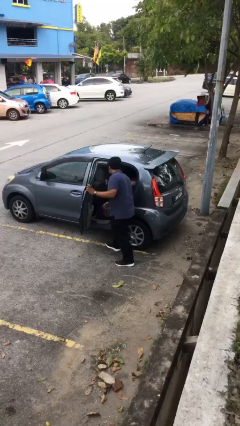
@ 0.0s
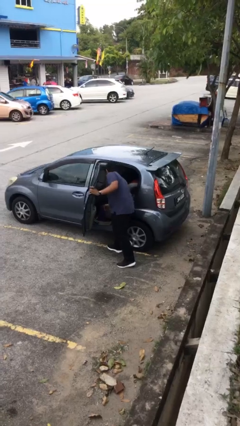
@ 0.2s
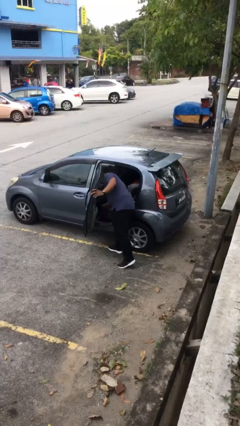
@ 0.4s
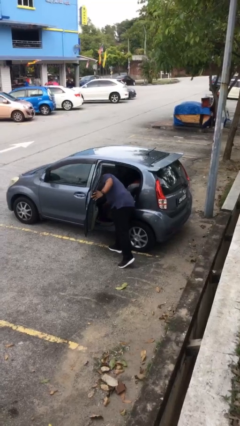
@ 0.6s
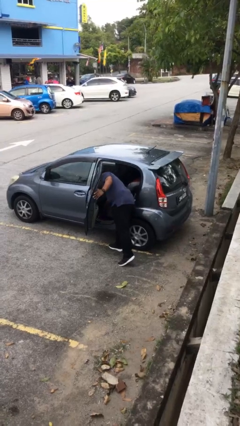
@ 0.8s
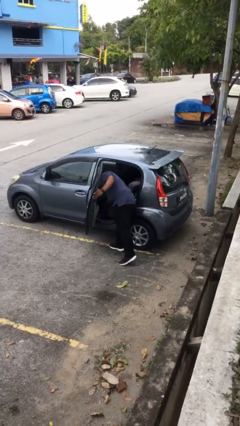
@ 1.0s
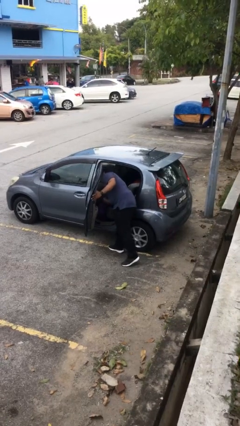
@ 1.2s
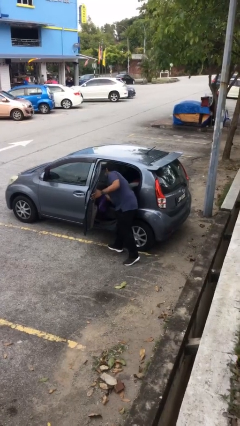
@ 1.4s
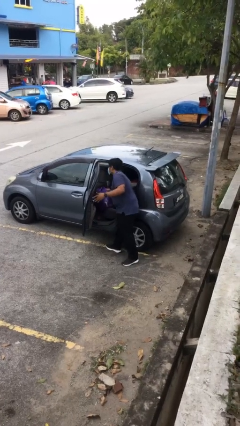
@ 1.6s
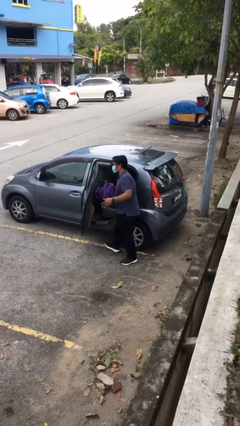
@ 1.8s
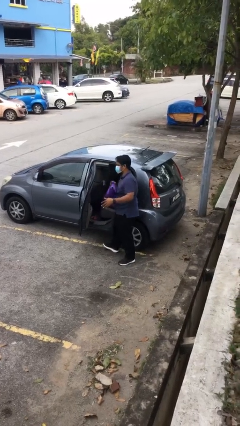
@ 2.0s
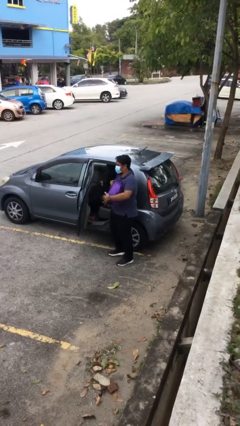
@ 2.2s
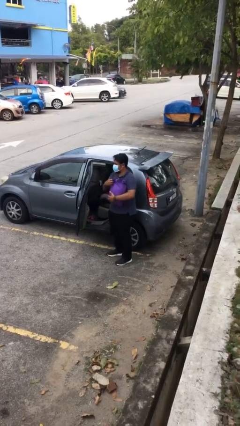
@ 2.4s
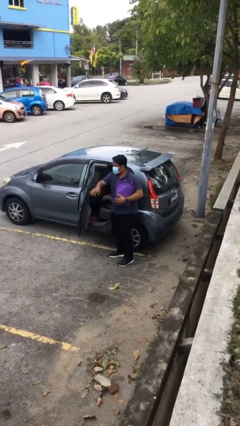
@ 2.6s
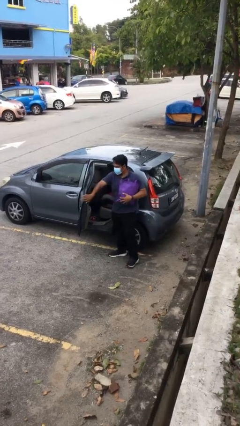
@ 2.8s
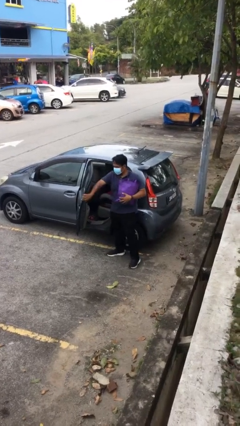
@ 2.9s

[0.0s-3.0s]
person unloads car

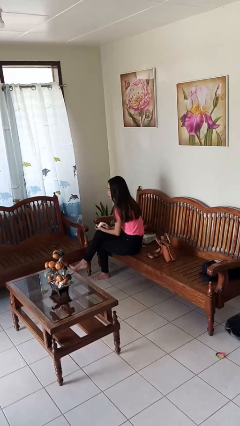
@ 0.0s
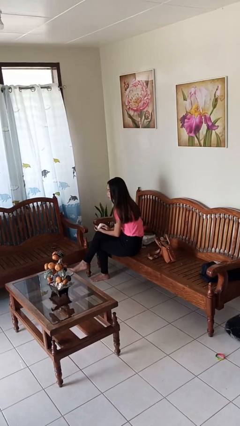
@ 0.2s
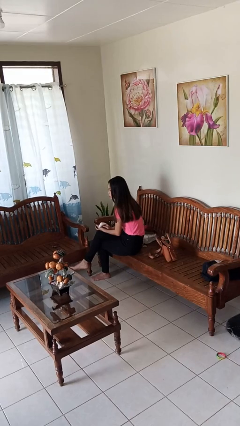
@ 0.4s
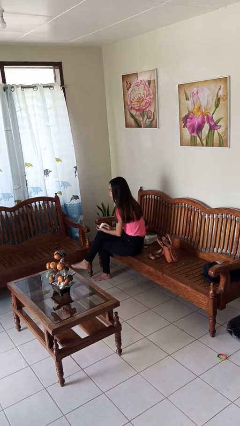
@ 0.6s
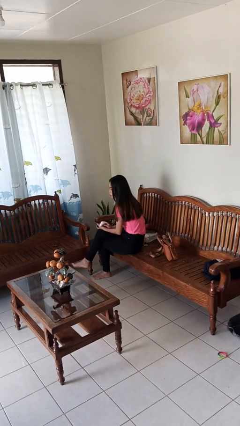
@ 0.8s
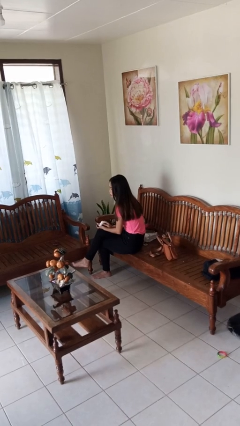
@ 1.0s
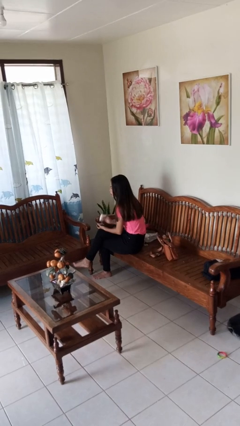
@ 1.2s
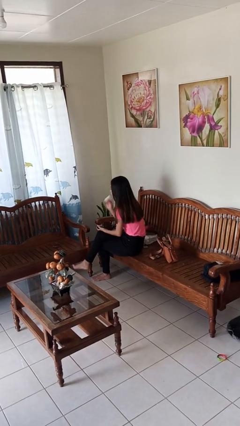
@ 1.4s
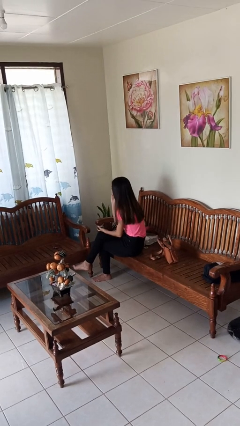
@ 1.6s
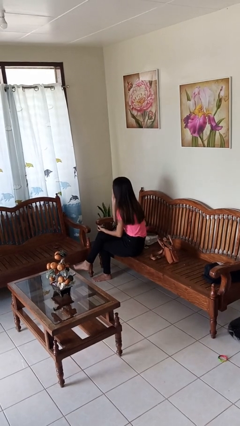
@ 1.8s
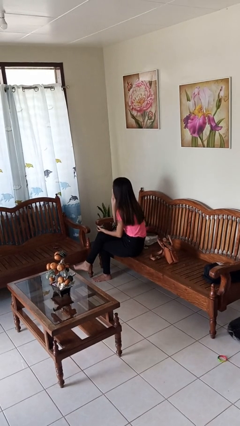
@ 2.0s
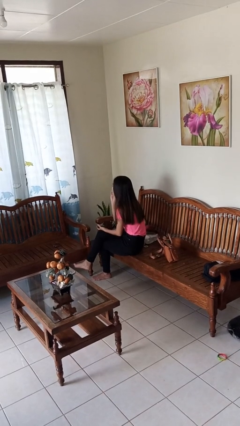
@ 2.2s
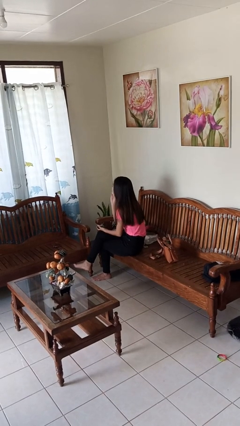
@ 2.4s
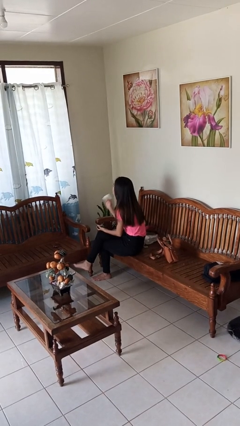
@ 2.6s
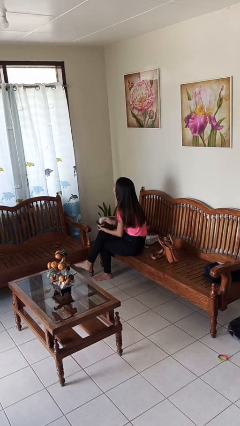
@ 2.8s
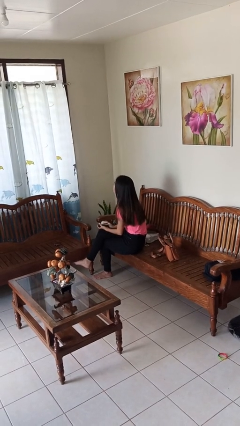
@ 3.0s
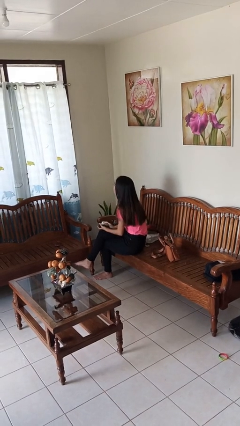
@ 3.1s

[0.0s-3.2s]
person applies foundation makeup

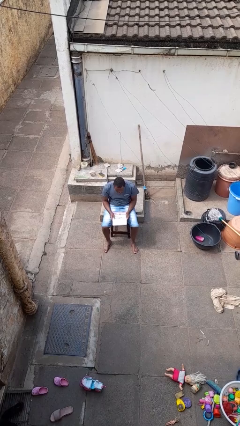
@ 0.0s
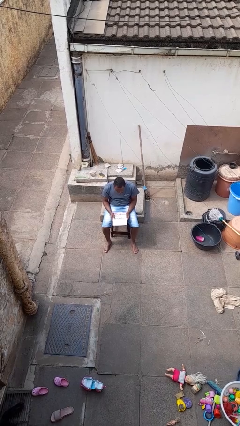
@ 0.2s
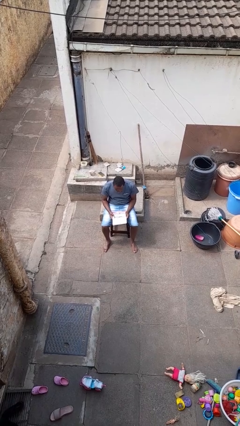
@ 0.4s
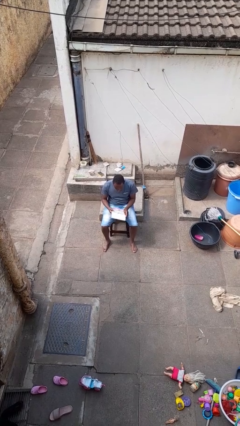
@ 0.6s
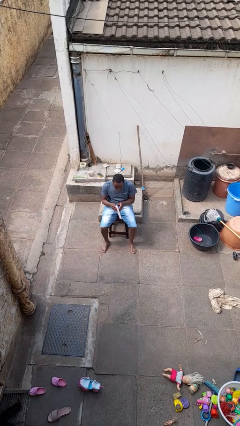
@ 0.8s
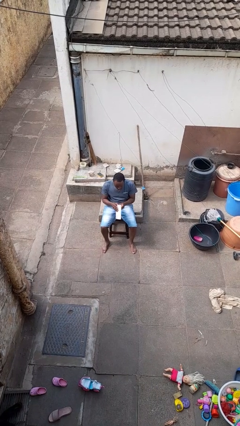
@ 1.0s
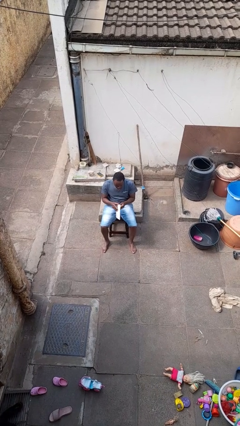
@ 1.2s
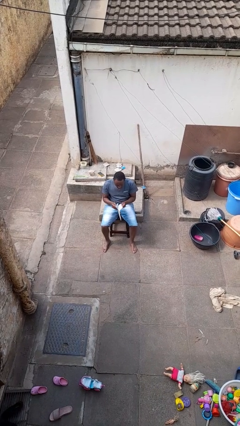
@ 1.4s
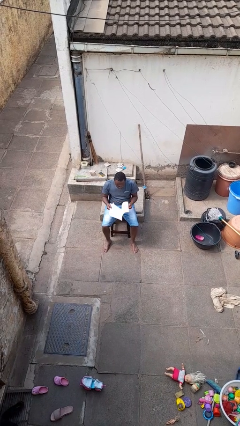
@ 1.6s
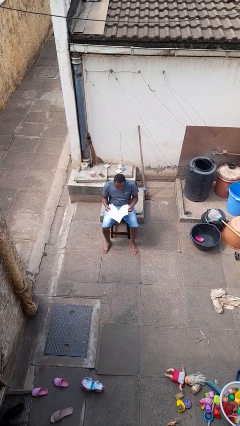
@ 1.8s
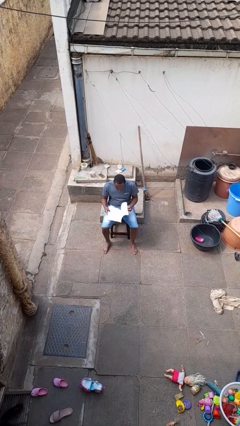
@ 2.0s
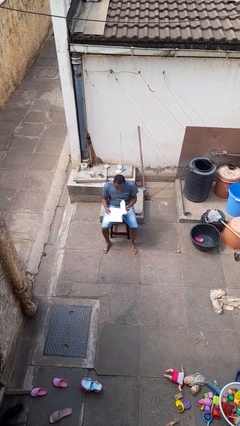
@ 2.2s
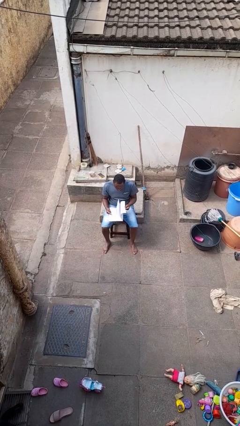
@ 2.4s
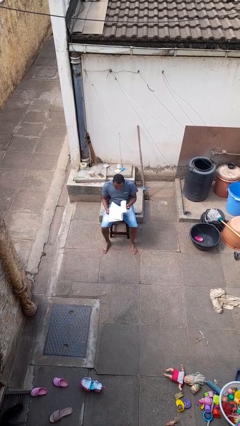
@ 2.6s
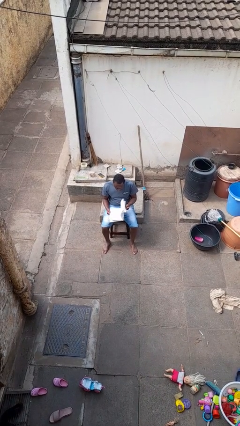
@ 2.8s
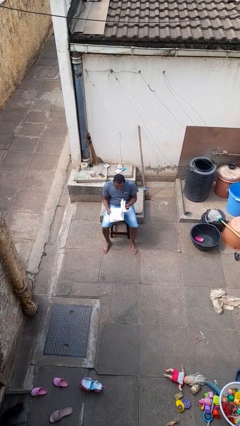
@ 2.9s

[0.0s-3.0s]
person reads magazine

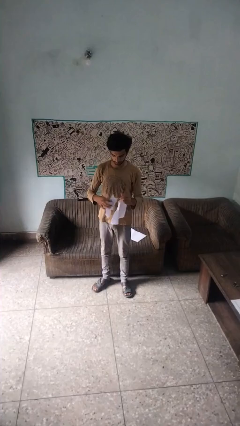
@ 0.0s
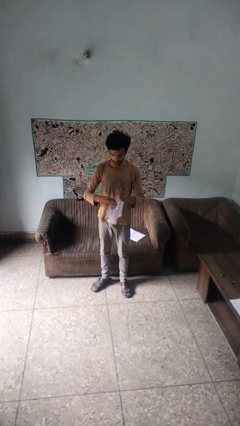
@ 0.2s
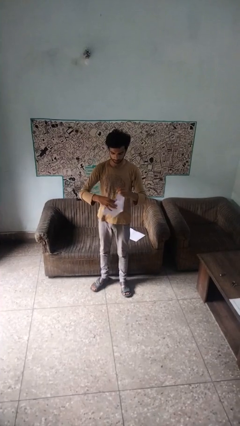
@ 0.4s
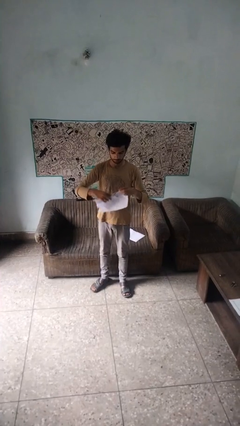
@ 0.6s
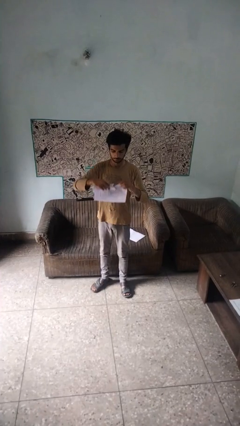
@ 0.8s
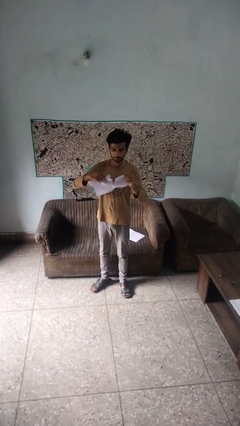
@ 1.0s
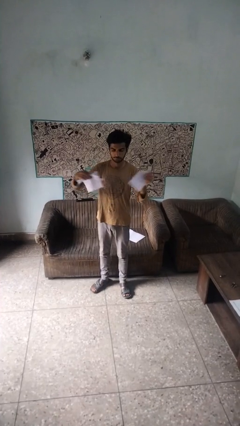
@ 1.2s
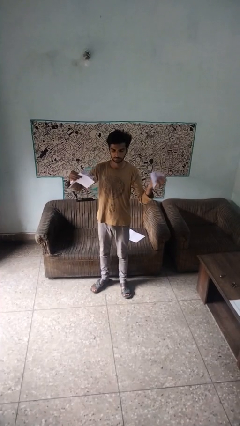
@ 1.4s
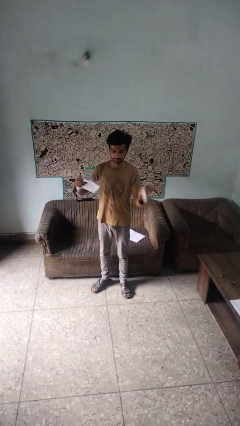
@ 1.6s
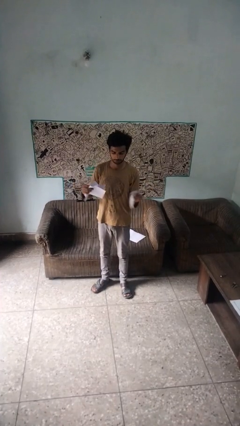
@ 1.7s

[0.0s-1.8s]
person tears paper

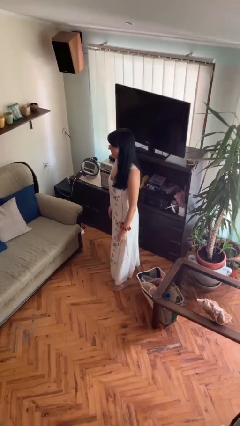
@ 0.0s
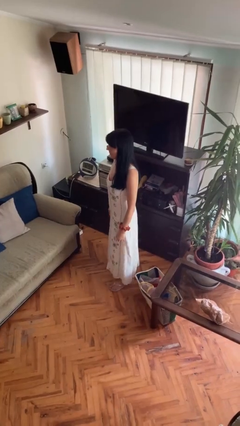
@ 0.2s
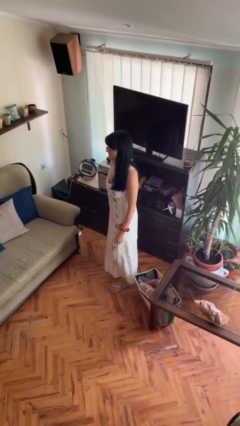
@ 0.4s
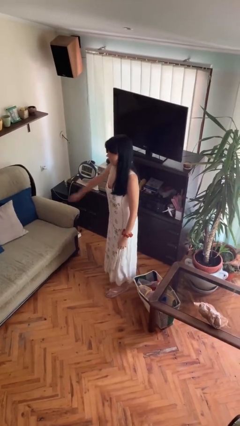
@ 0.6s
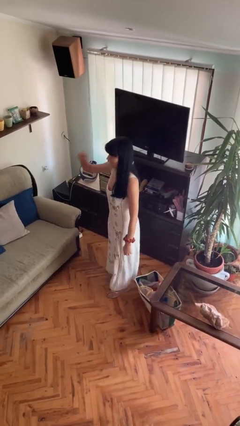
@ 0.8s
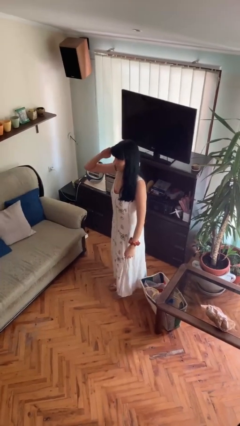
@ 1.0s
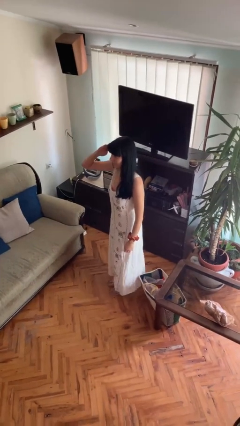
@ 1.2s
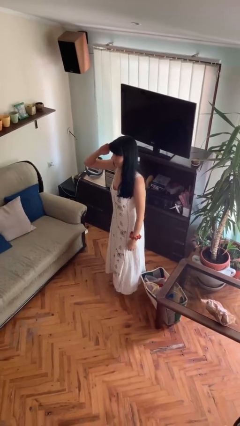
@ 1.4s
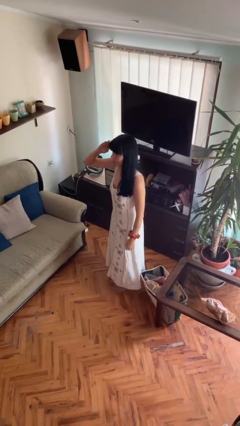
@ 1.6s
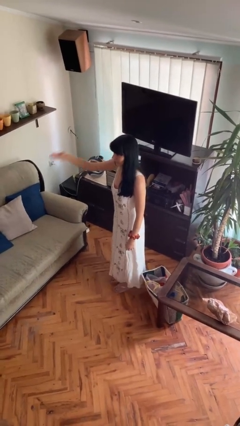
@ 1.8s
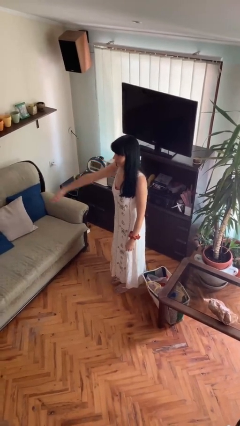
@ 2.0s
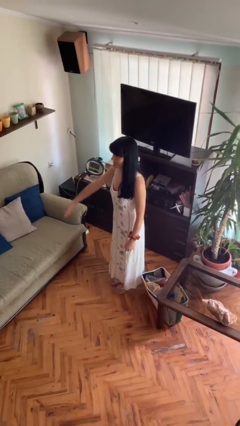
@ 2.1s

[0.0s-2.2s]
person salutes

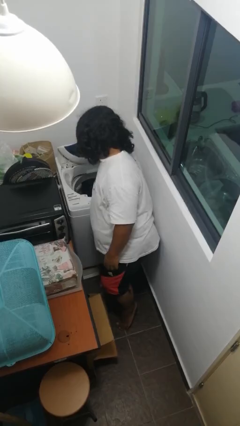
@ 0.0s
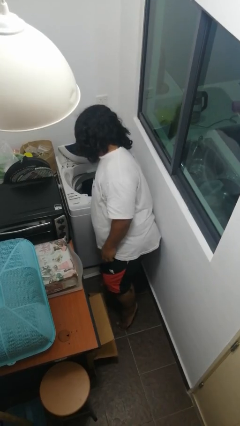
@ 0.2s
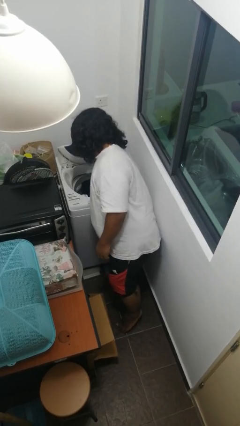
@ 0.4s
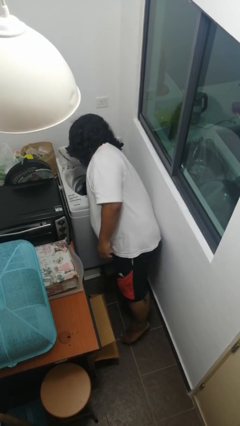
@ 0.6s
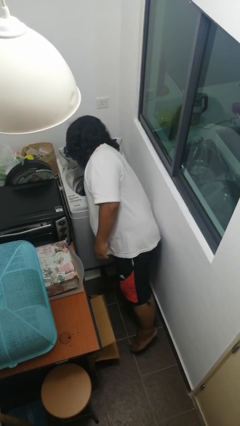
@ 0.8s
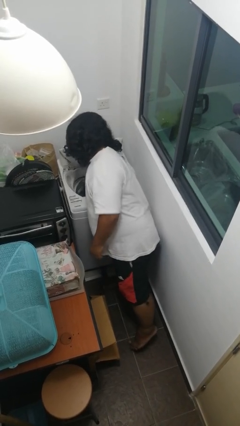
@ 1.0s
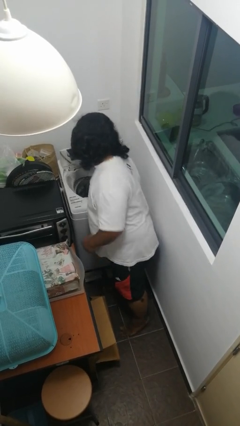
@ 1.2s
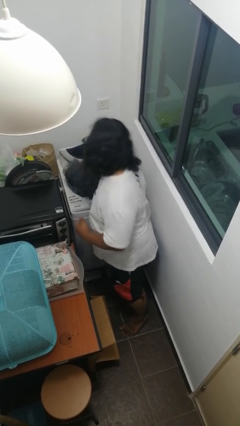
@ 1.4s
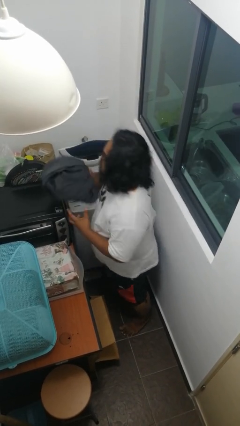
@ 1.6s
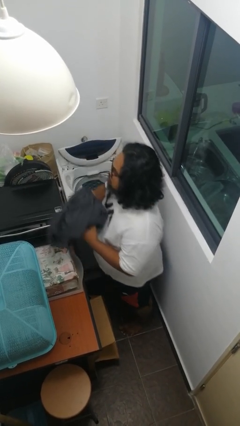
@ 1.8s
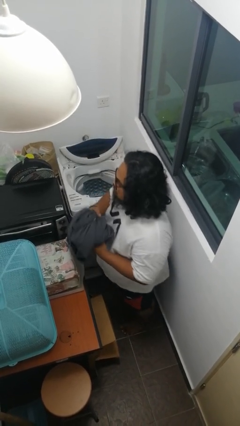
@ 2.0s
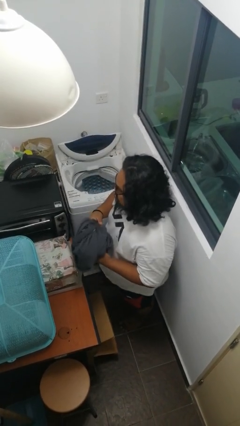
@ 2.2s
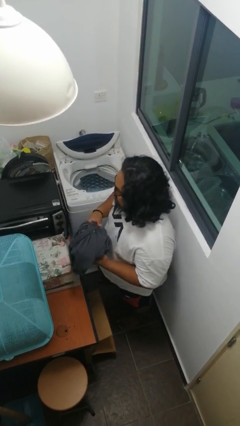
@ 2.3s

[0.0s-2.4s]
person unloads clotheswasher

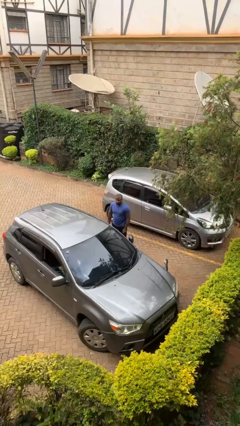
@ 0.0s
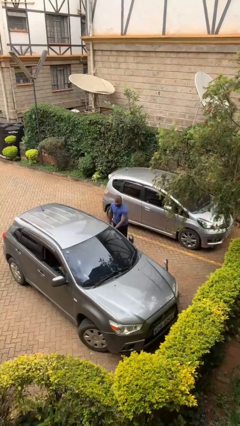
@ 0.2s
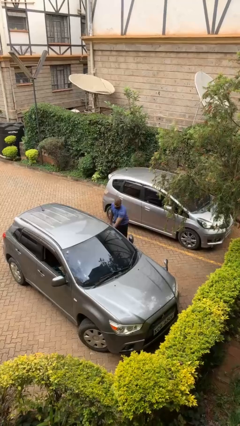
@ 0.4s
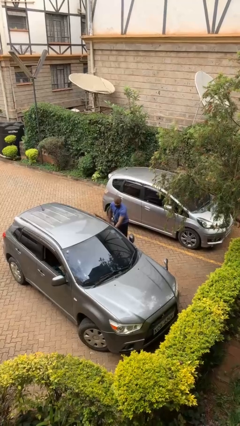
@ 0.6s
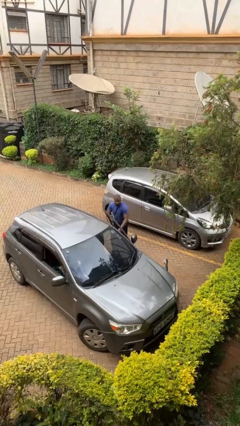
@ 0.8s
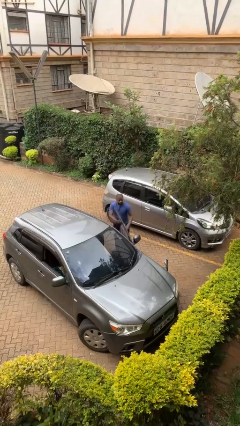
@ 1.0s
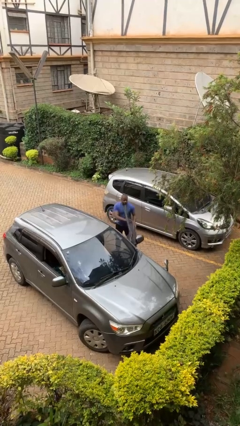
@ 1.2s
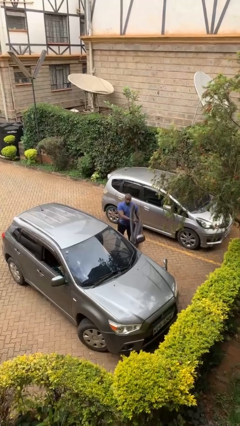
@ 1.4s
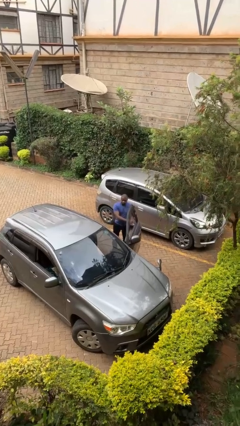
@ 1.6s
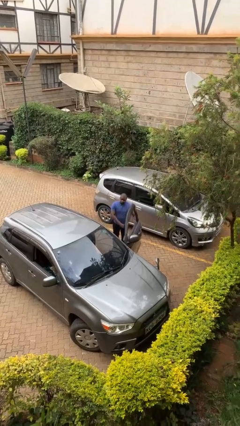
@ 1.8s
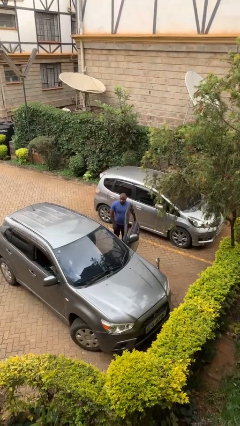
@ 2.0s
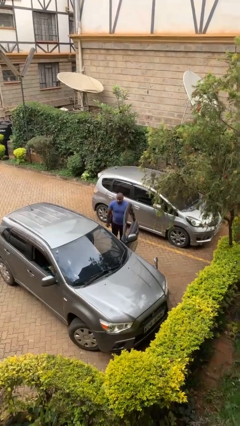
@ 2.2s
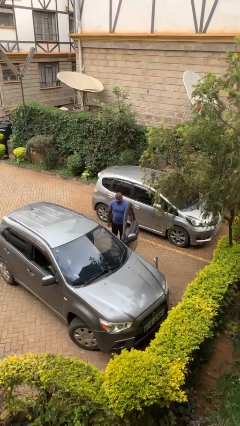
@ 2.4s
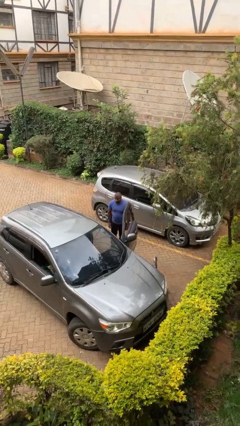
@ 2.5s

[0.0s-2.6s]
person opens car door
